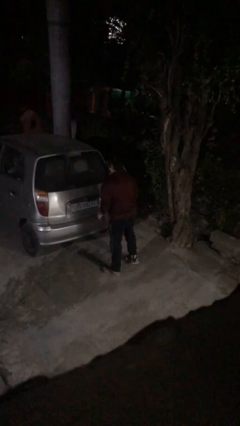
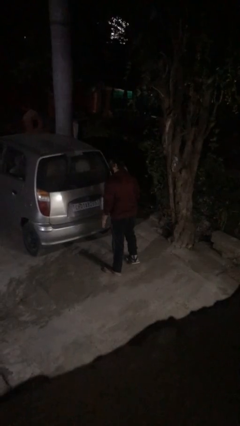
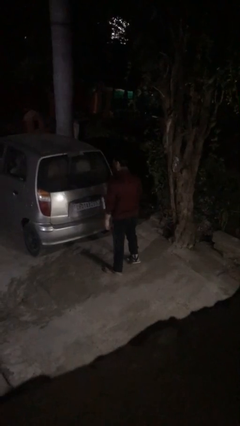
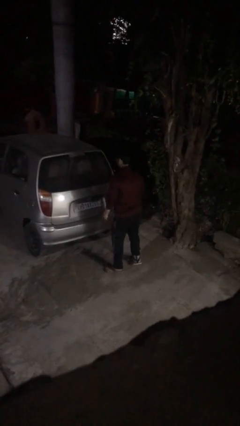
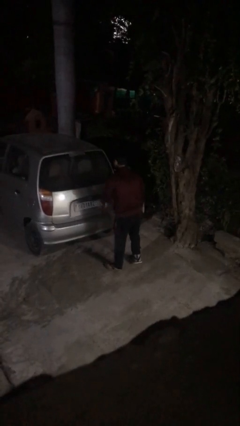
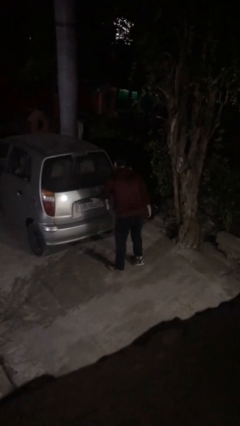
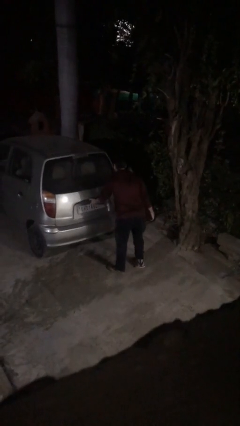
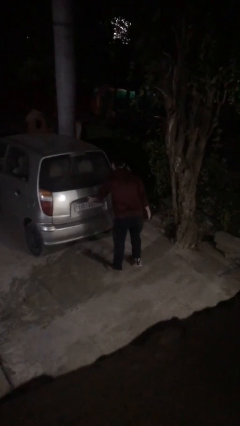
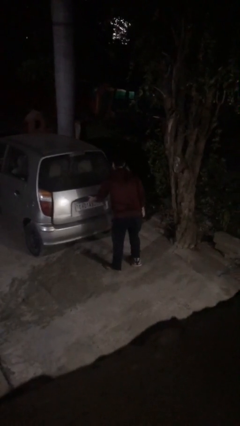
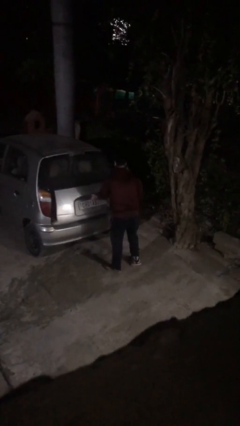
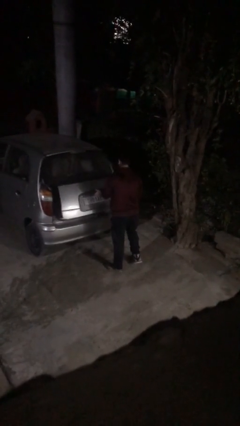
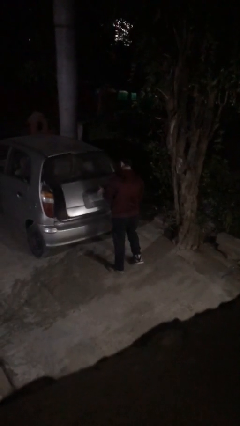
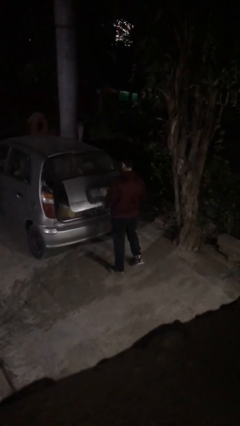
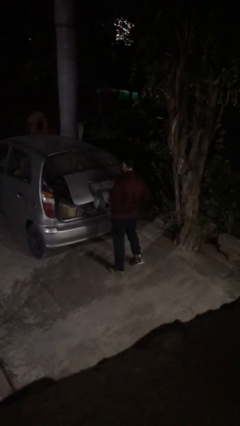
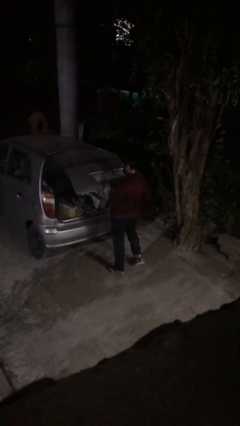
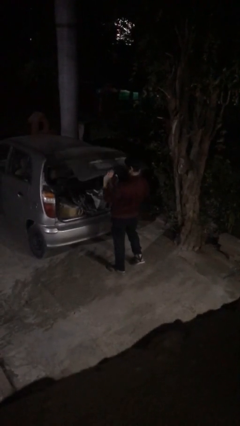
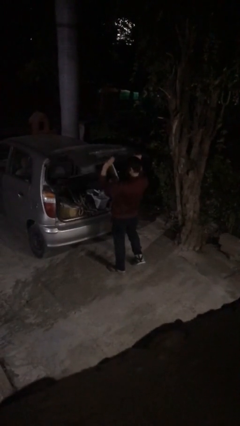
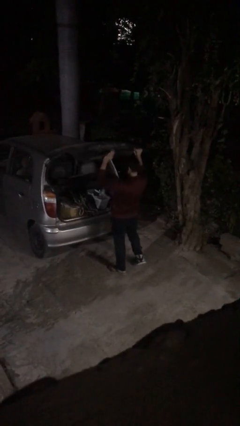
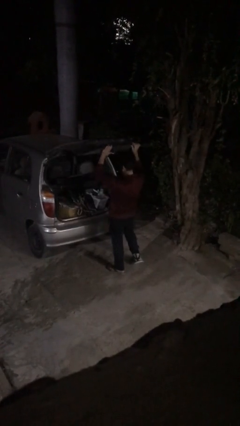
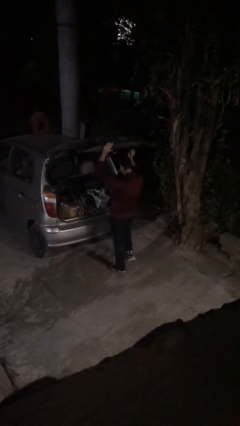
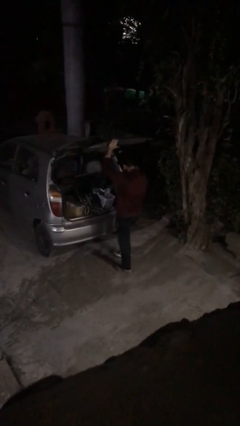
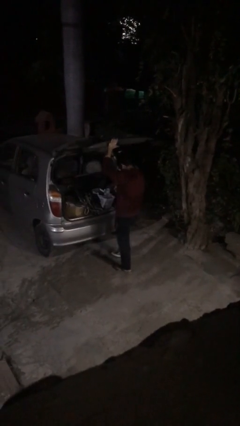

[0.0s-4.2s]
person opens car trunk

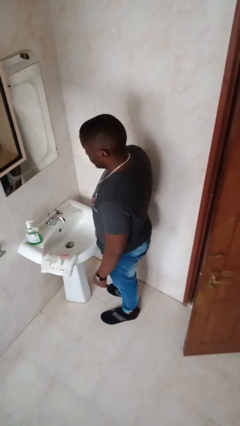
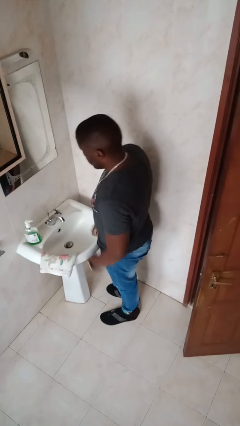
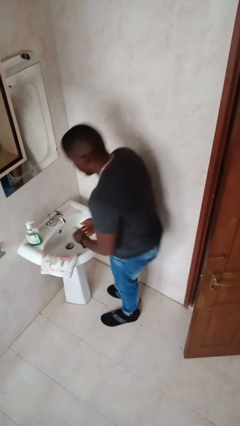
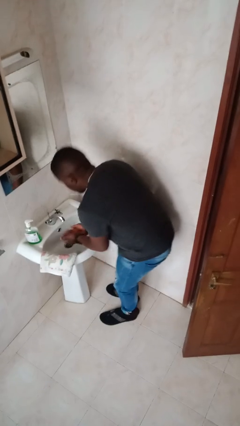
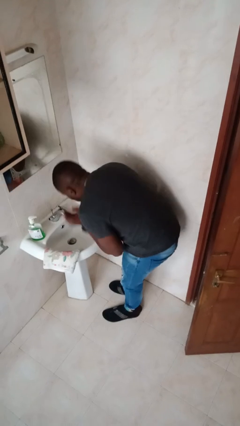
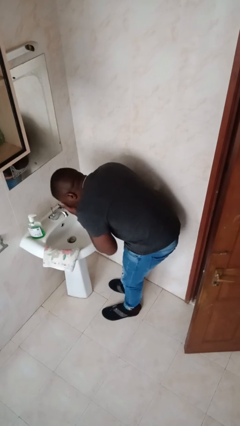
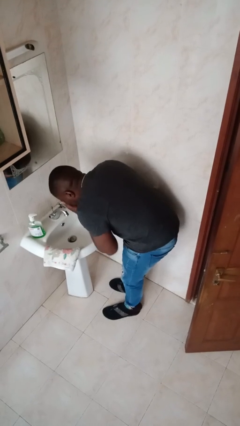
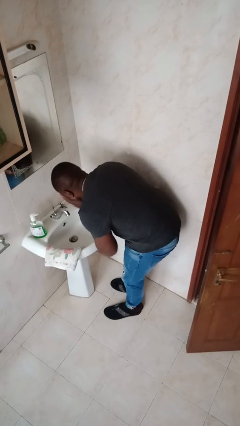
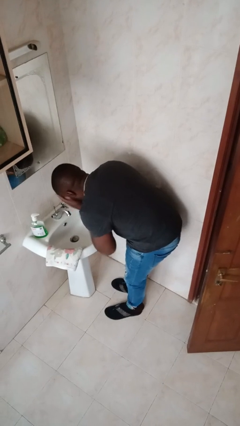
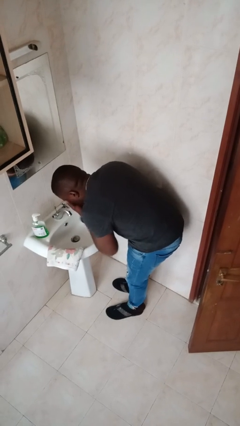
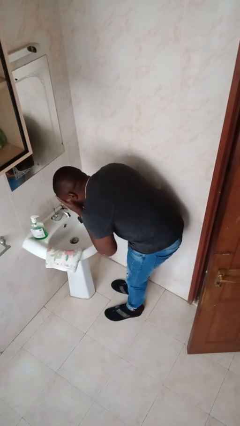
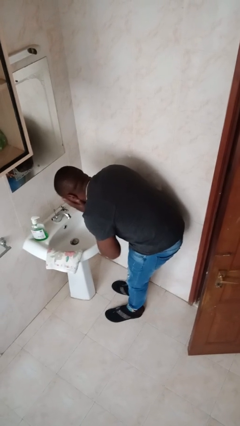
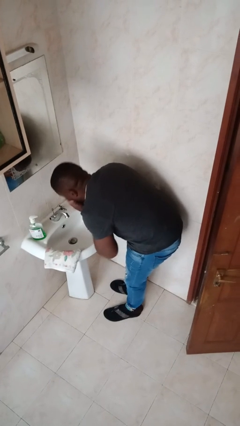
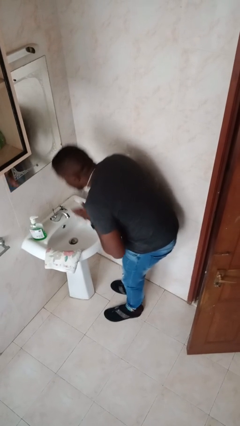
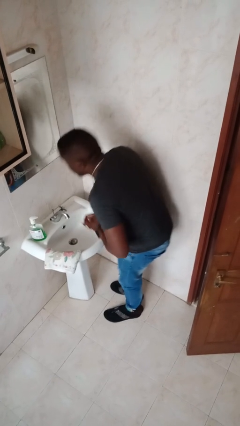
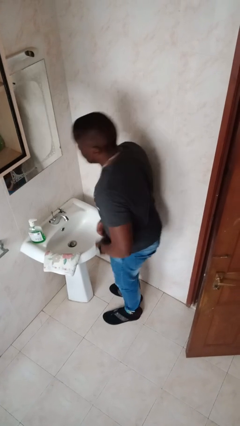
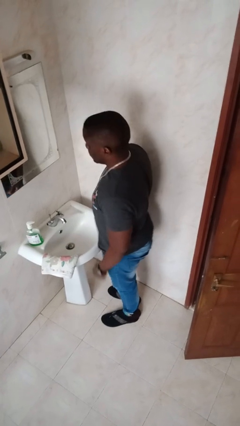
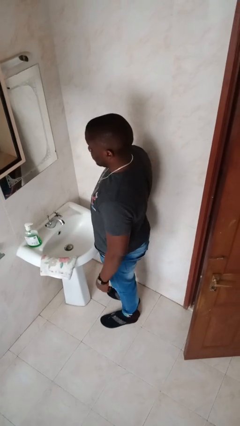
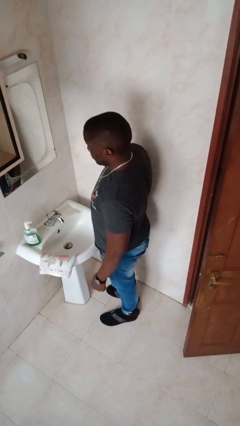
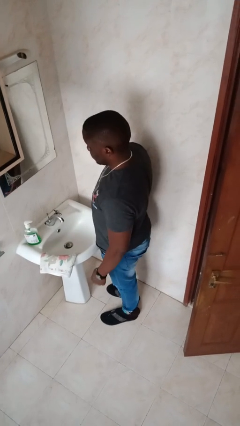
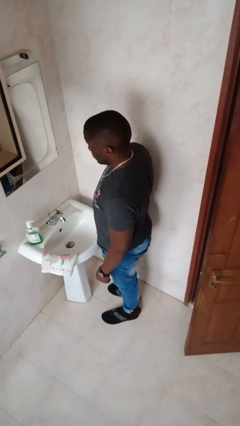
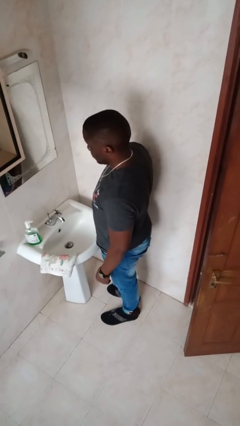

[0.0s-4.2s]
person washes face

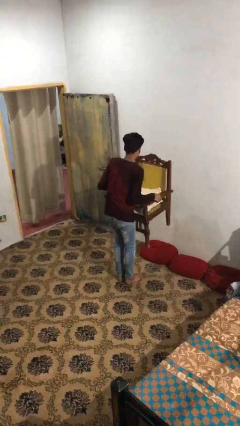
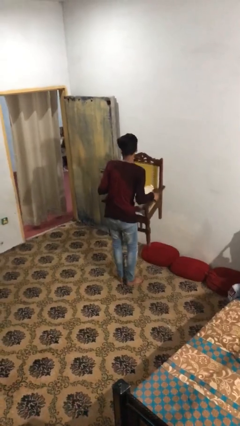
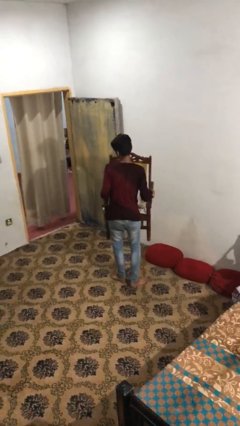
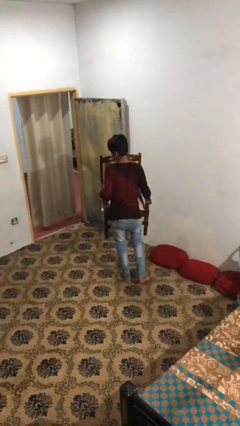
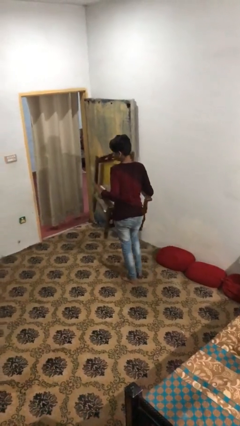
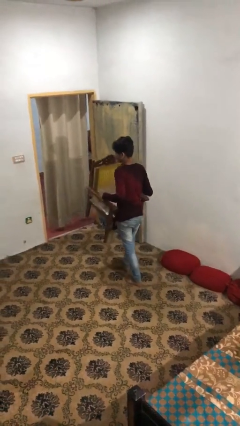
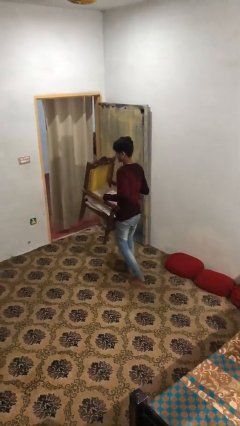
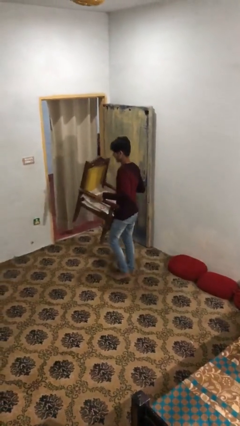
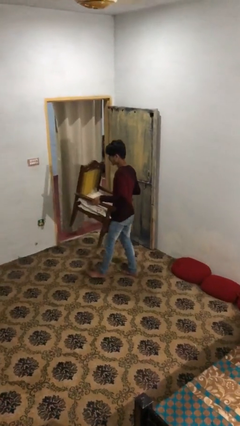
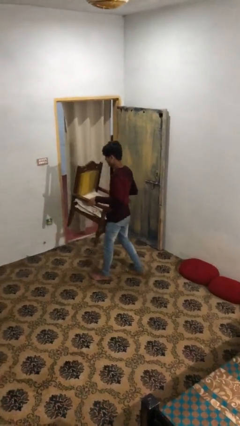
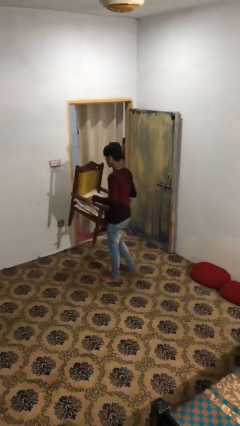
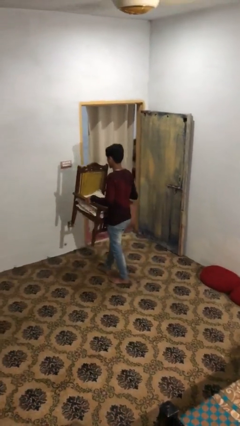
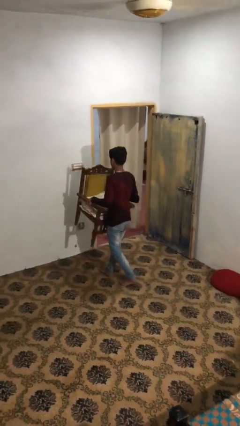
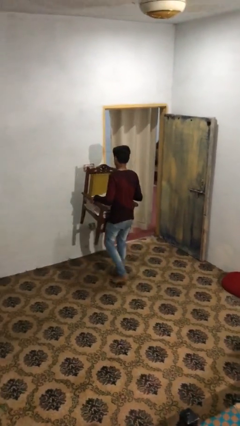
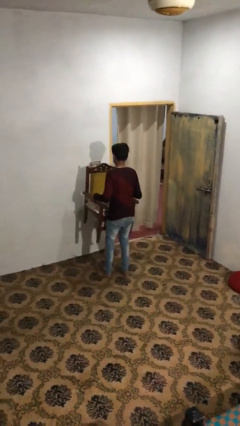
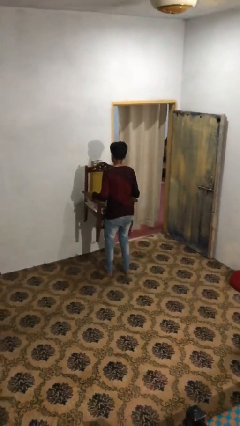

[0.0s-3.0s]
person carries heavy object

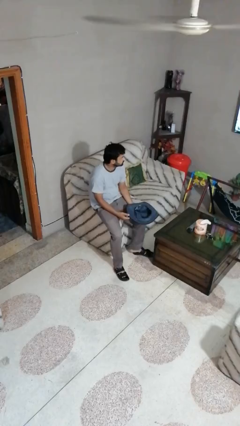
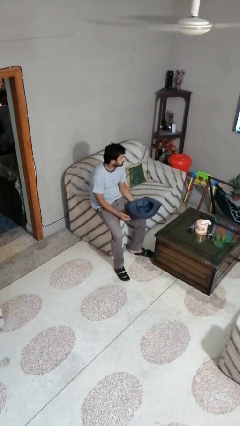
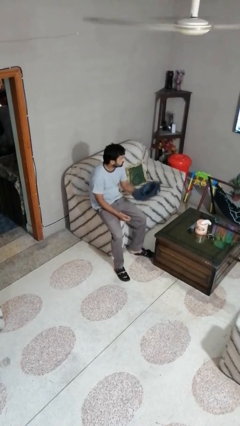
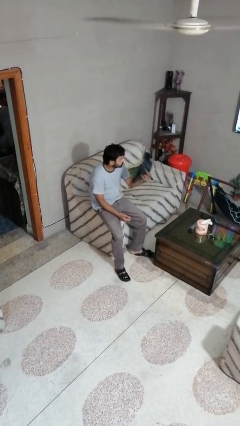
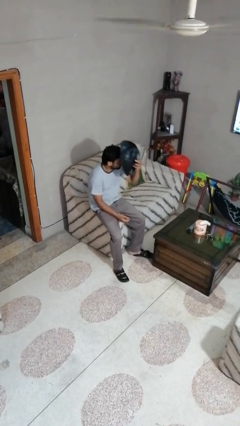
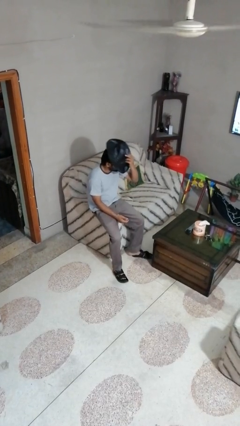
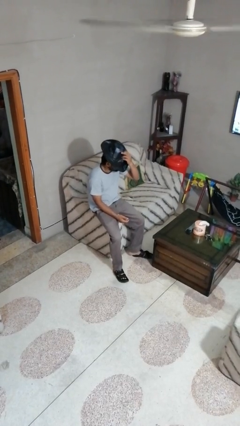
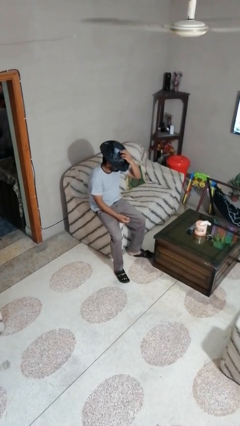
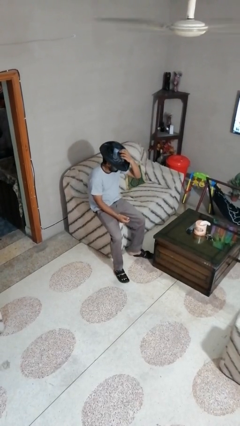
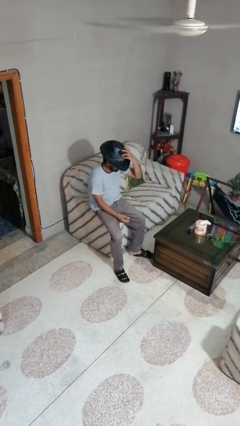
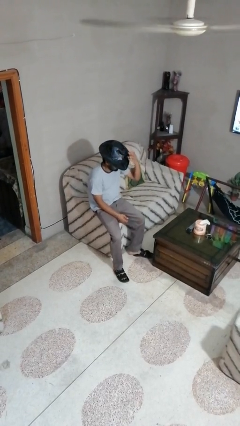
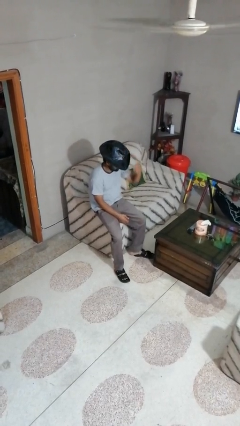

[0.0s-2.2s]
person puts on hat

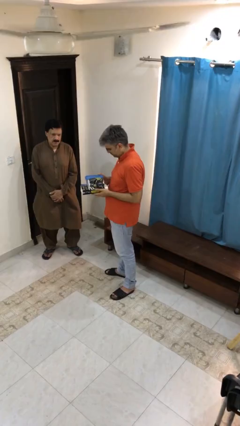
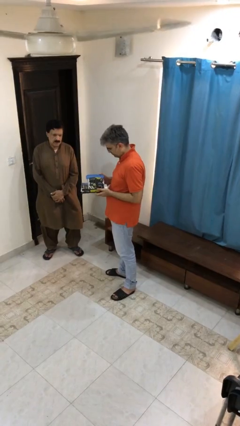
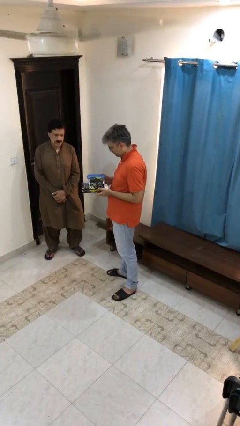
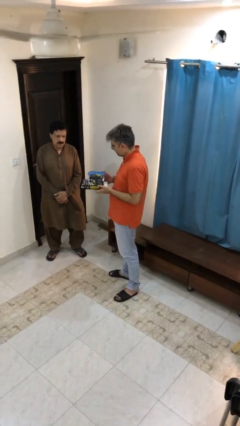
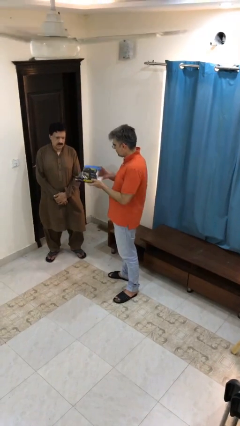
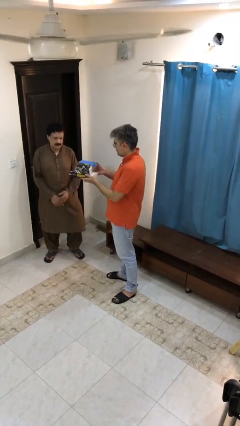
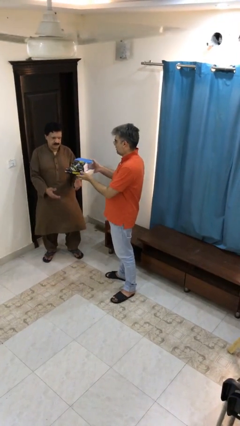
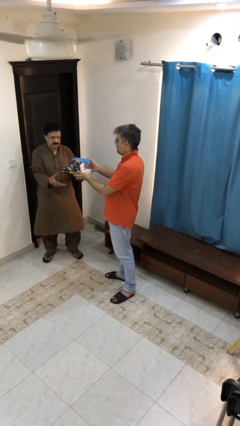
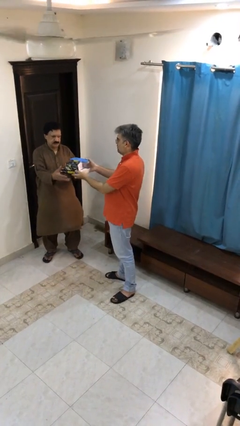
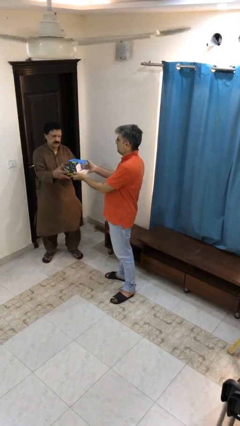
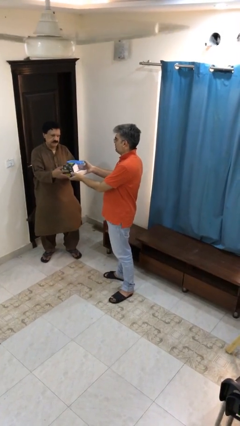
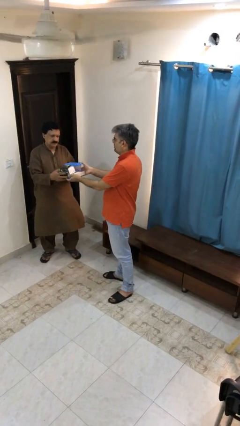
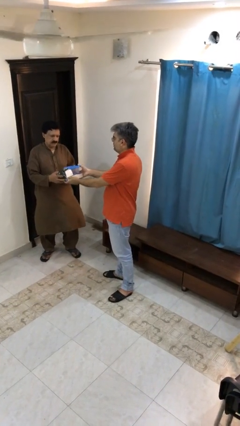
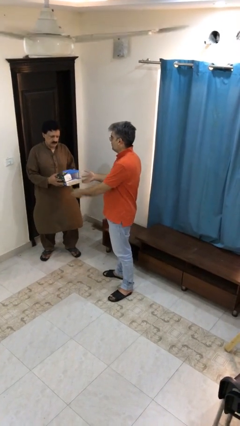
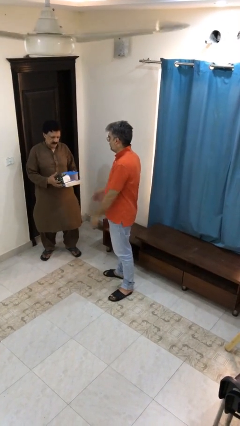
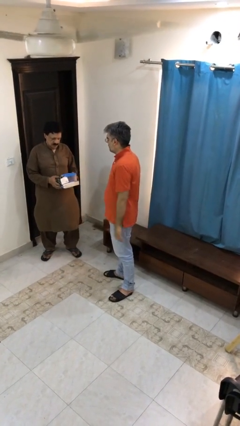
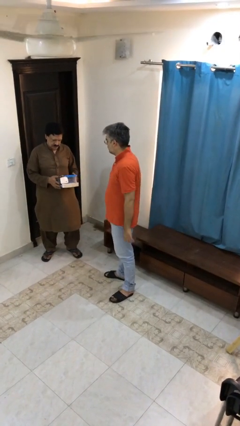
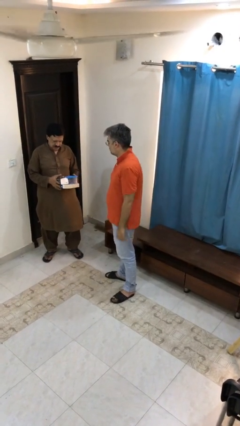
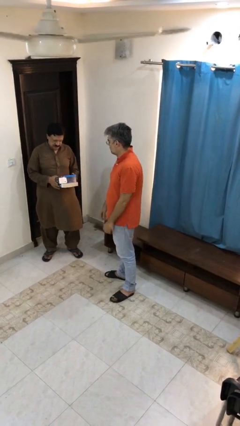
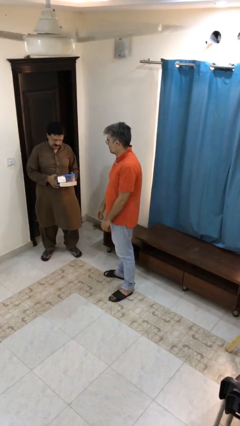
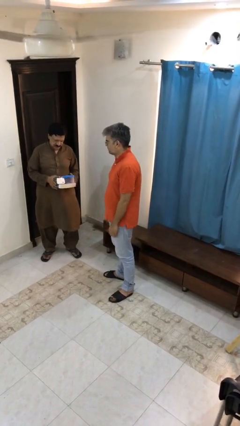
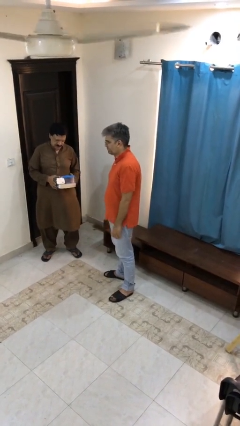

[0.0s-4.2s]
person transfers object to person
